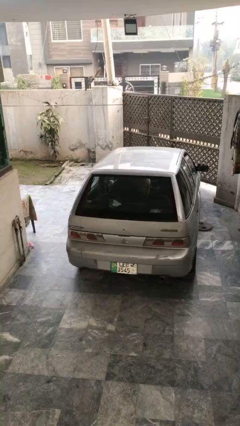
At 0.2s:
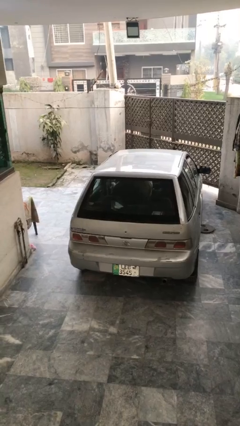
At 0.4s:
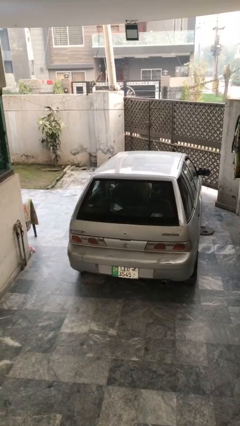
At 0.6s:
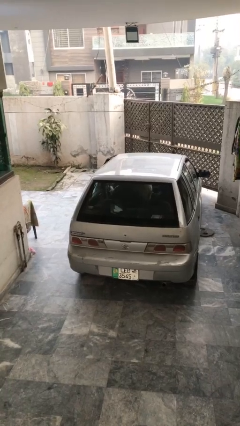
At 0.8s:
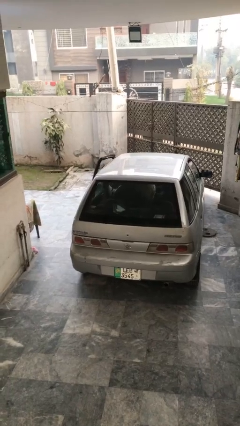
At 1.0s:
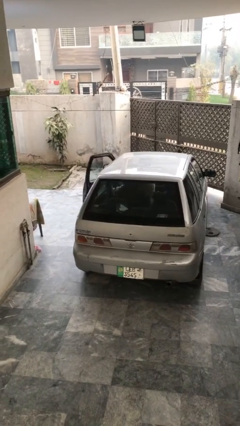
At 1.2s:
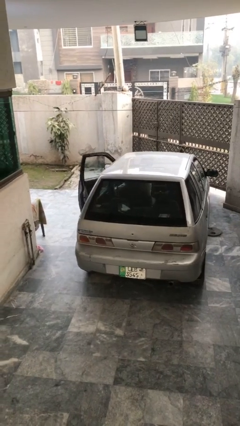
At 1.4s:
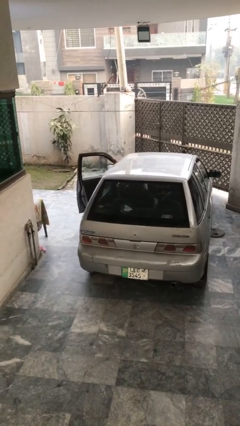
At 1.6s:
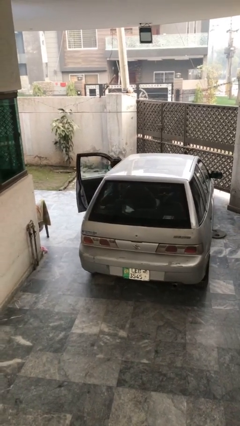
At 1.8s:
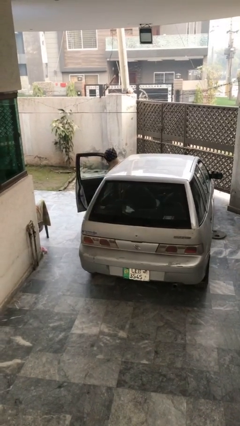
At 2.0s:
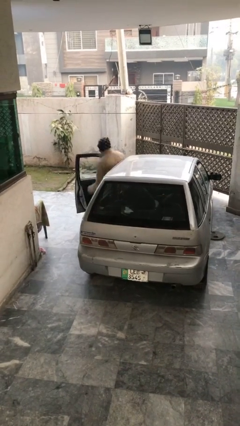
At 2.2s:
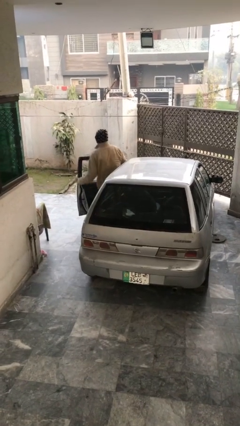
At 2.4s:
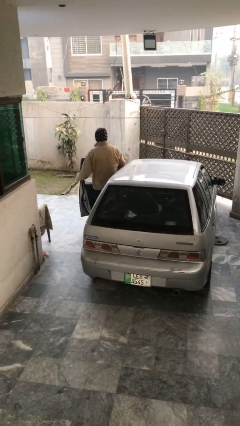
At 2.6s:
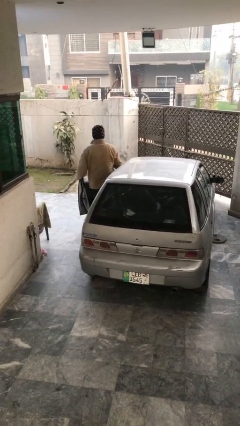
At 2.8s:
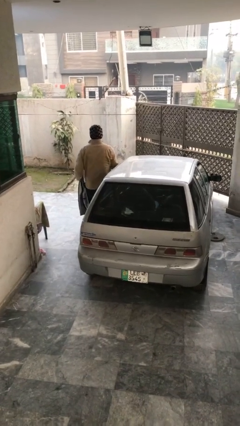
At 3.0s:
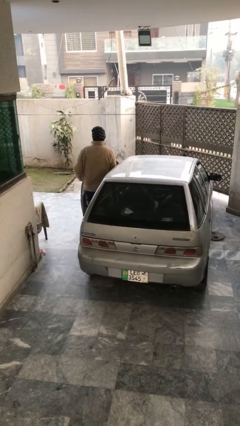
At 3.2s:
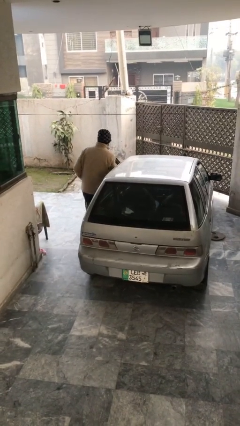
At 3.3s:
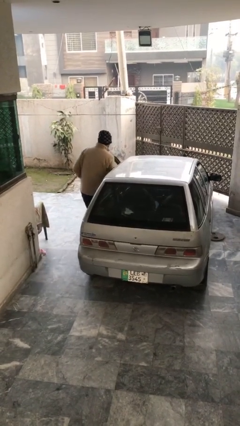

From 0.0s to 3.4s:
car drops off person

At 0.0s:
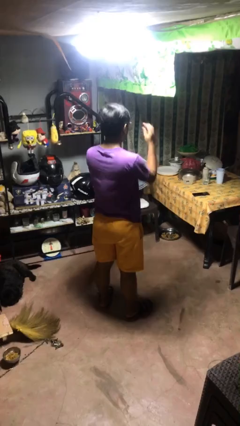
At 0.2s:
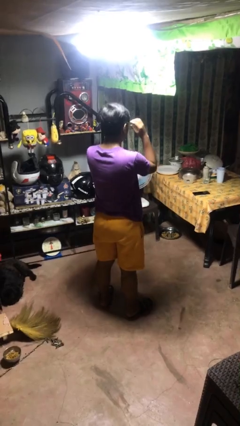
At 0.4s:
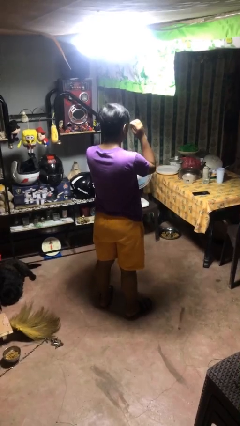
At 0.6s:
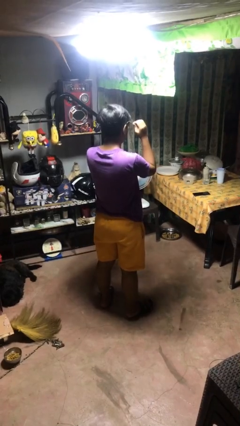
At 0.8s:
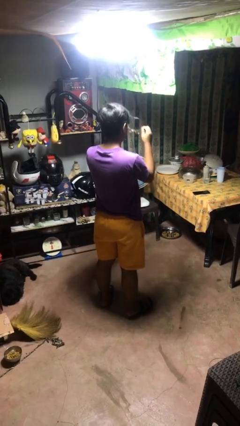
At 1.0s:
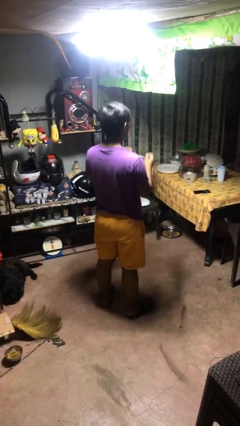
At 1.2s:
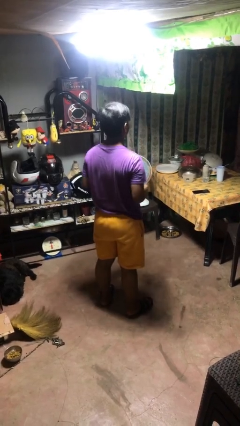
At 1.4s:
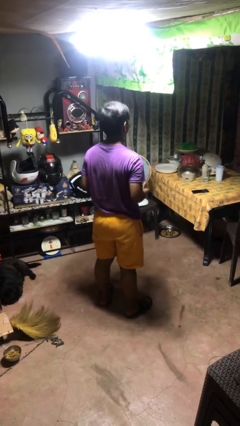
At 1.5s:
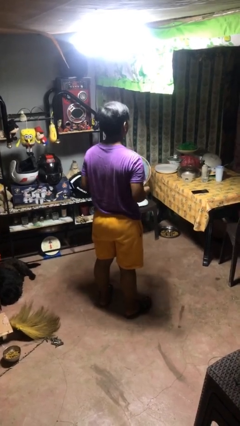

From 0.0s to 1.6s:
person takes off glasses

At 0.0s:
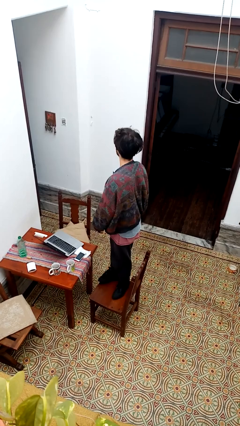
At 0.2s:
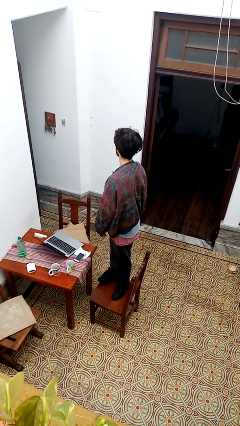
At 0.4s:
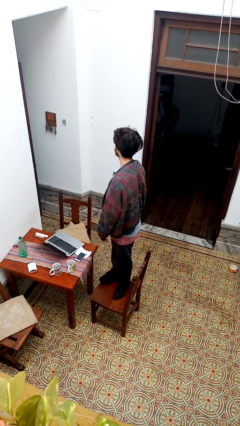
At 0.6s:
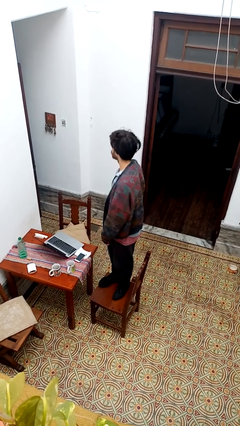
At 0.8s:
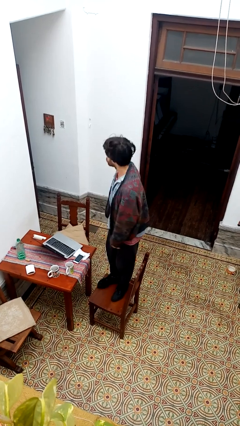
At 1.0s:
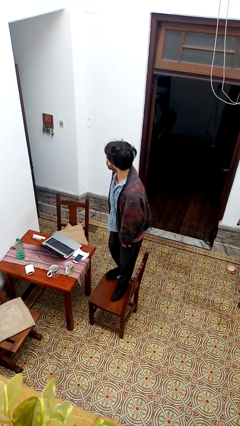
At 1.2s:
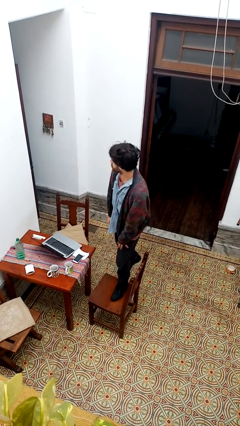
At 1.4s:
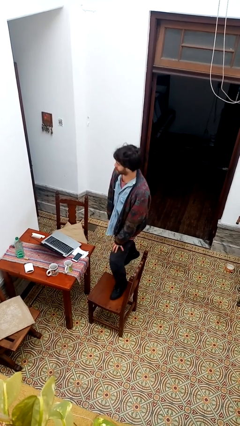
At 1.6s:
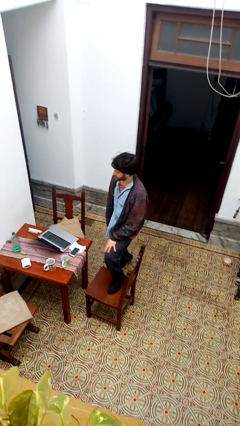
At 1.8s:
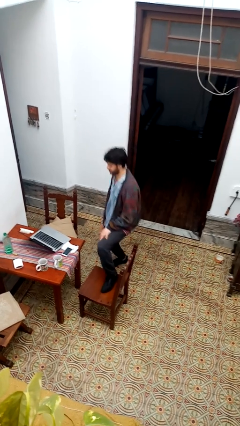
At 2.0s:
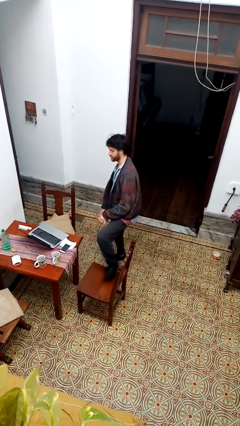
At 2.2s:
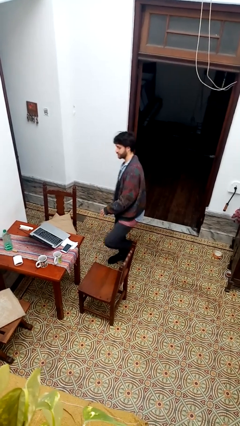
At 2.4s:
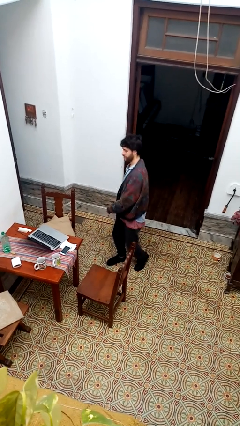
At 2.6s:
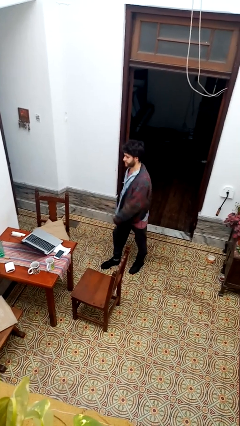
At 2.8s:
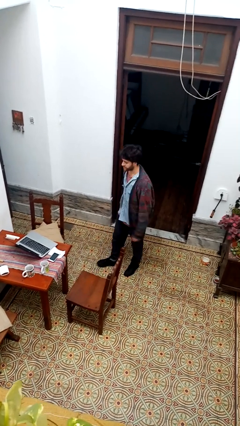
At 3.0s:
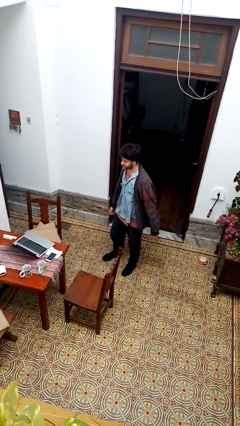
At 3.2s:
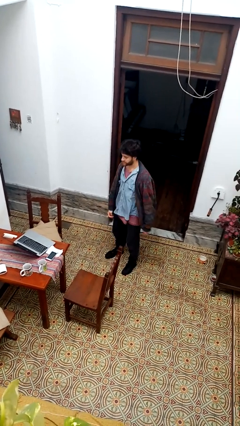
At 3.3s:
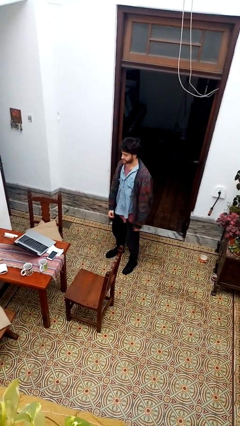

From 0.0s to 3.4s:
person climbs off chair

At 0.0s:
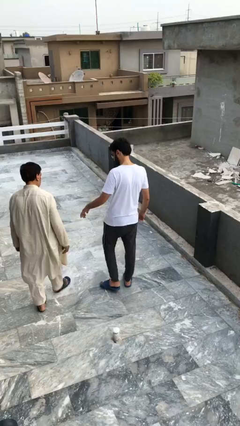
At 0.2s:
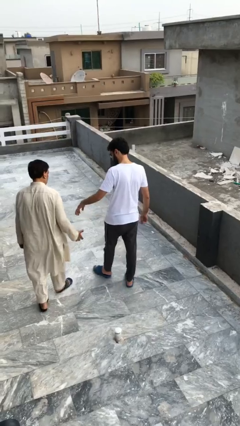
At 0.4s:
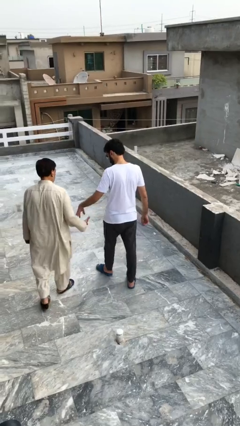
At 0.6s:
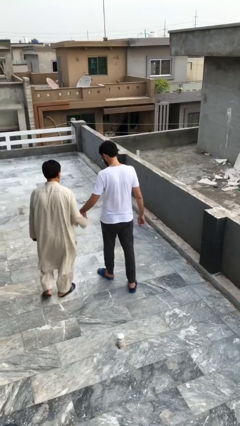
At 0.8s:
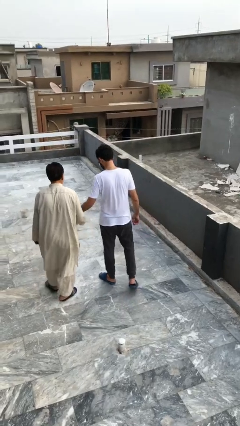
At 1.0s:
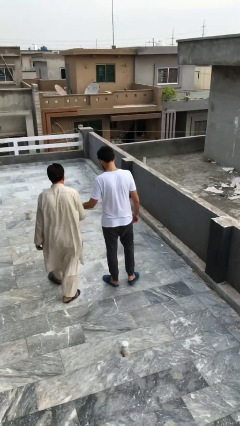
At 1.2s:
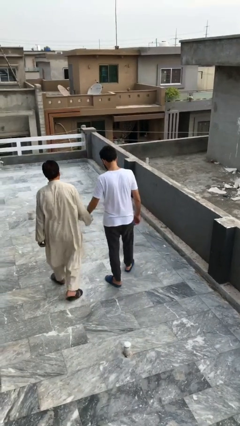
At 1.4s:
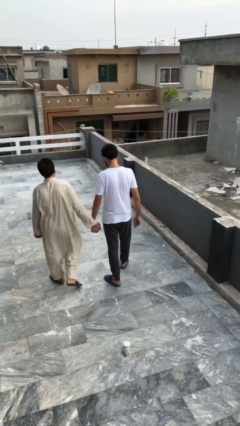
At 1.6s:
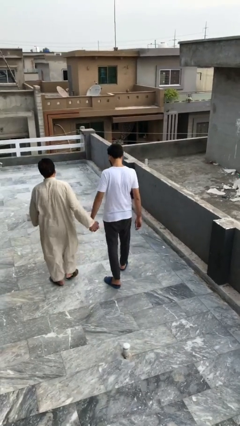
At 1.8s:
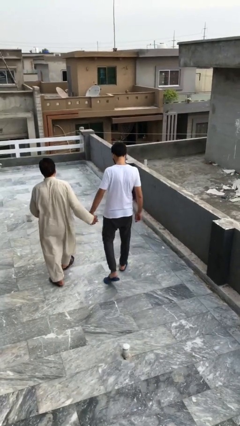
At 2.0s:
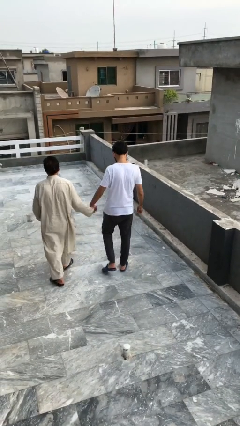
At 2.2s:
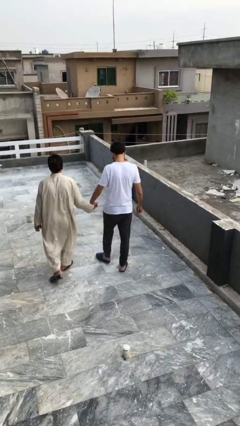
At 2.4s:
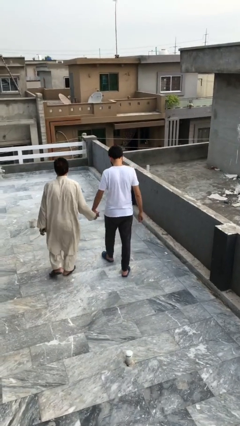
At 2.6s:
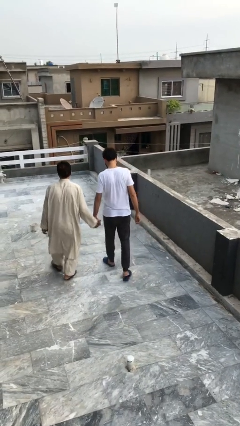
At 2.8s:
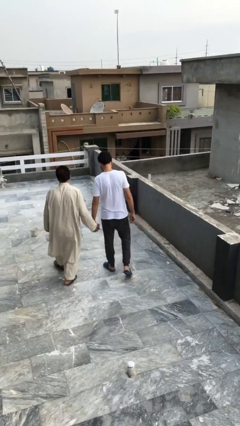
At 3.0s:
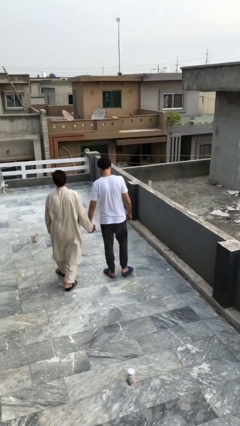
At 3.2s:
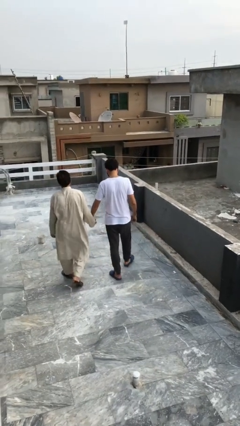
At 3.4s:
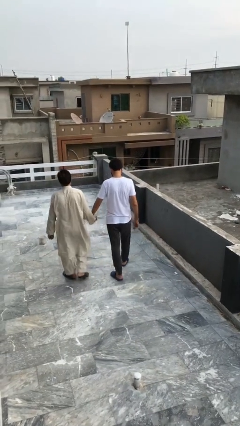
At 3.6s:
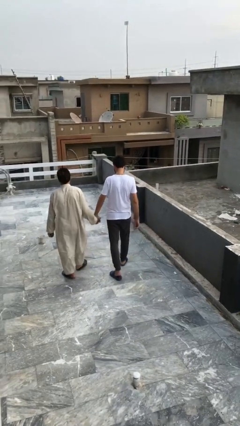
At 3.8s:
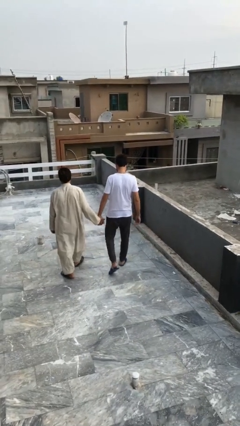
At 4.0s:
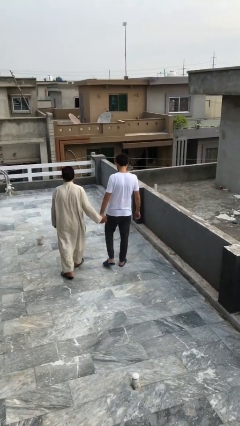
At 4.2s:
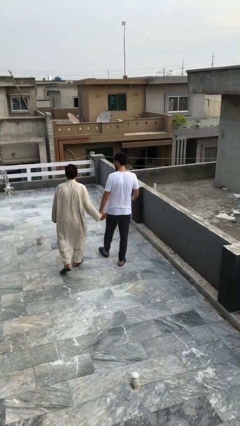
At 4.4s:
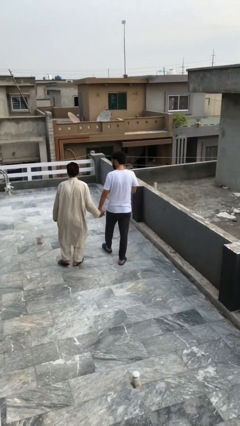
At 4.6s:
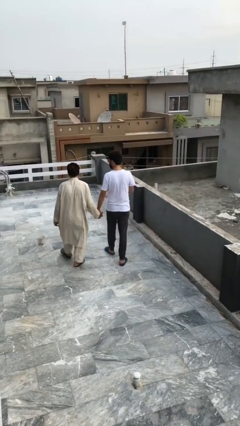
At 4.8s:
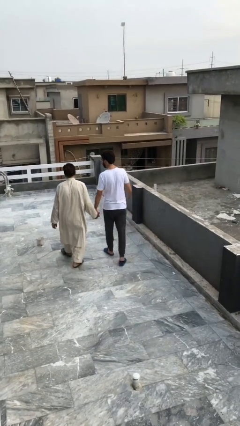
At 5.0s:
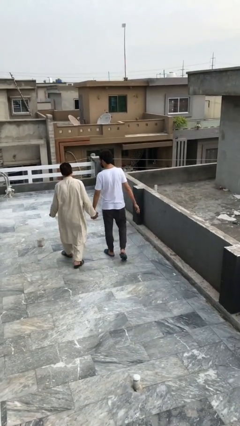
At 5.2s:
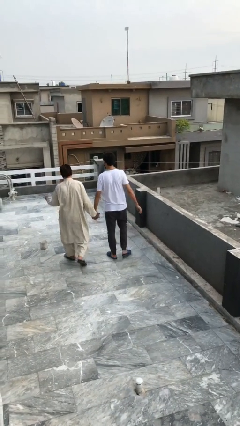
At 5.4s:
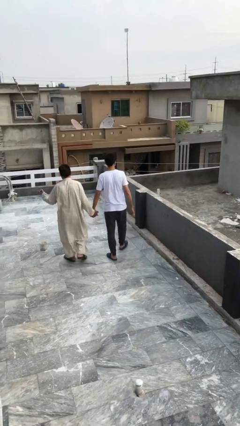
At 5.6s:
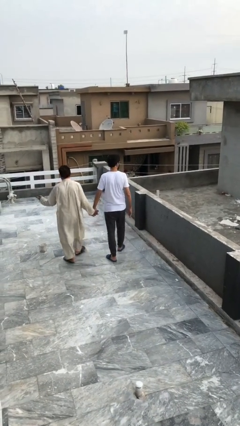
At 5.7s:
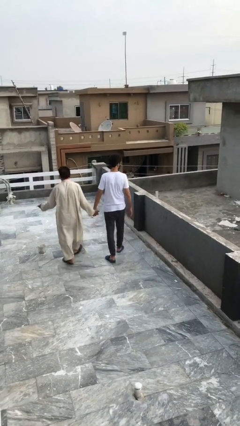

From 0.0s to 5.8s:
person holds hand

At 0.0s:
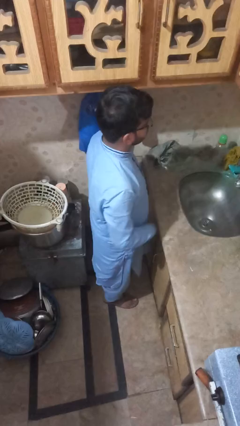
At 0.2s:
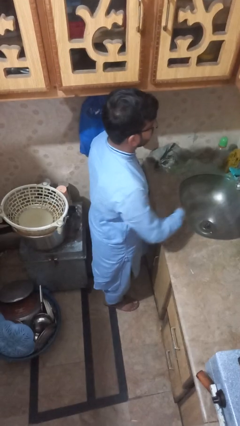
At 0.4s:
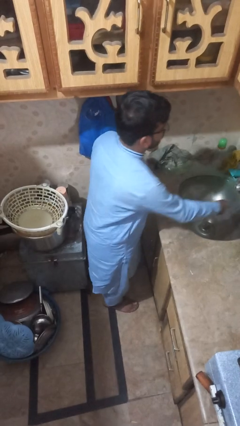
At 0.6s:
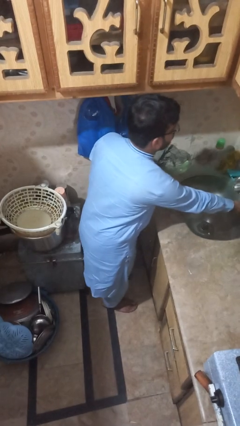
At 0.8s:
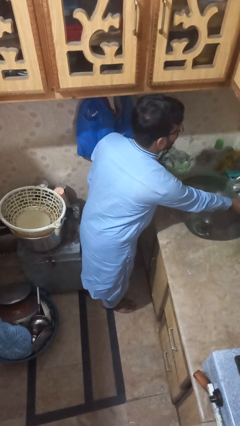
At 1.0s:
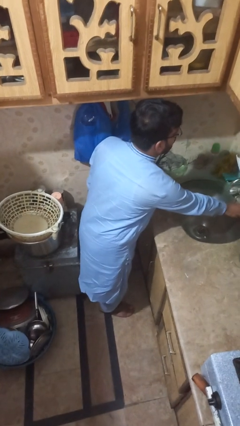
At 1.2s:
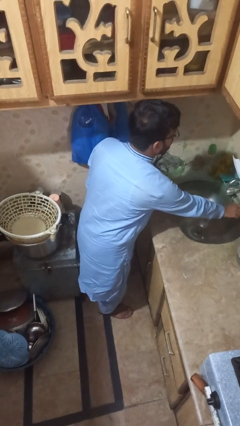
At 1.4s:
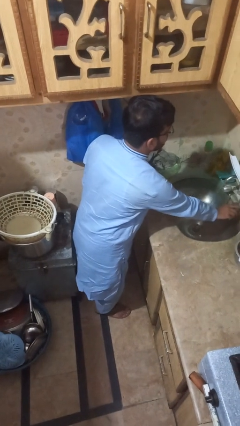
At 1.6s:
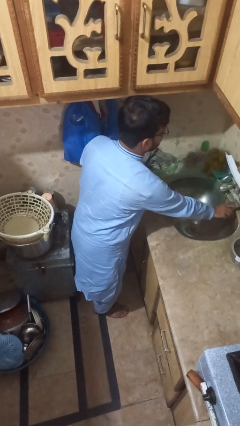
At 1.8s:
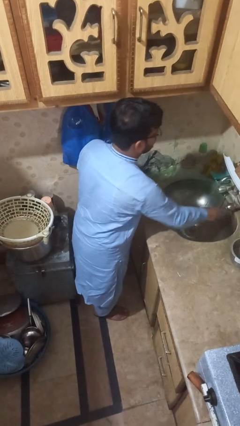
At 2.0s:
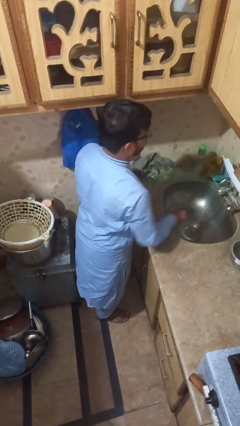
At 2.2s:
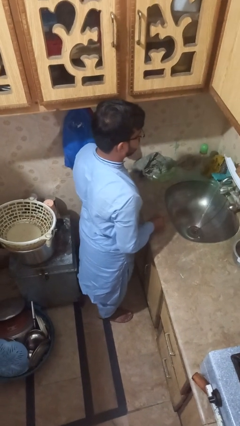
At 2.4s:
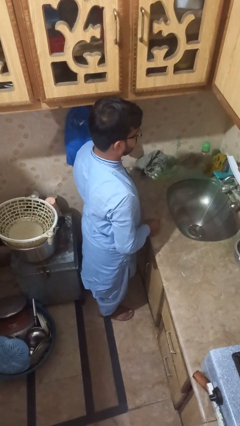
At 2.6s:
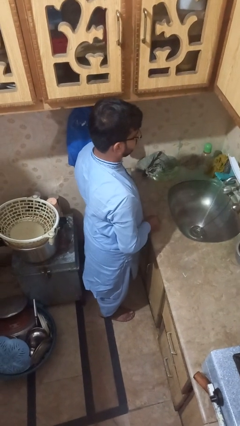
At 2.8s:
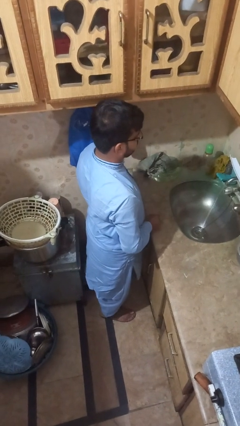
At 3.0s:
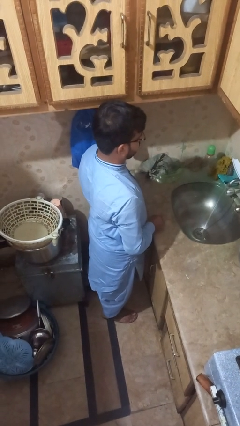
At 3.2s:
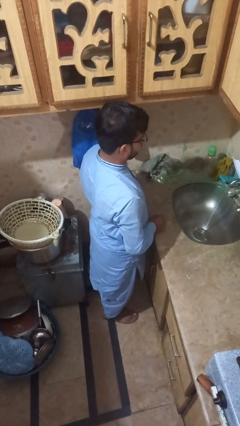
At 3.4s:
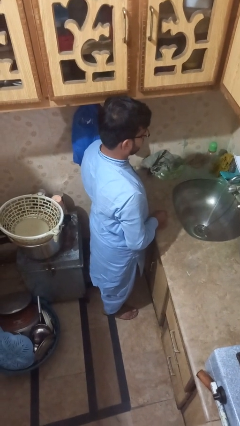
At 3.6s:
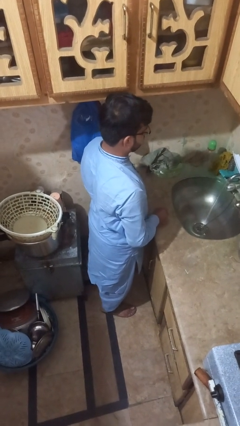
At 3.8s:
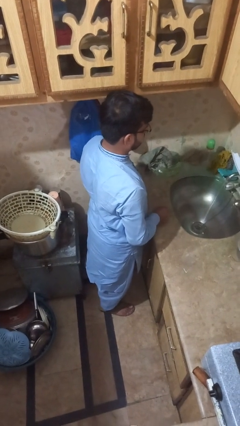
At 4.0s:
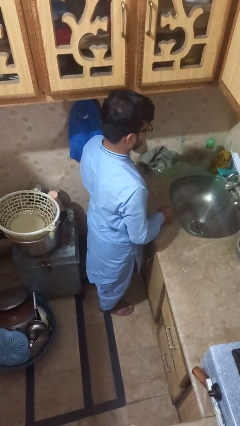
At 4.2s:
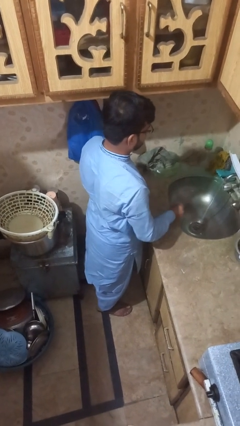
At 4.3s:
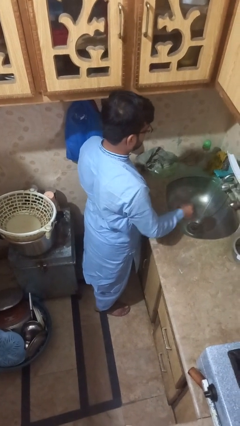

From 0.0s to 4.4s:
person turns on faucet
